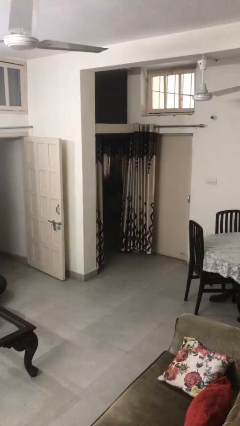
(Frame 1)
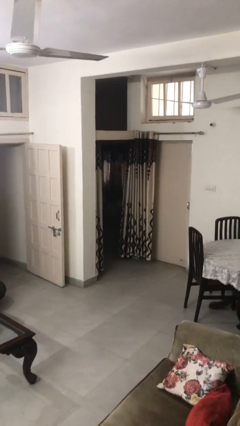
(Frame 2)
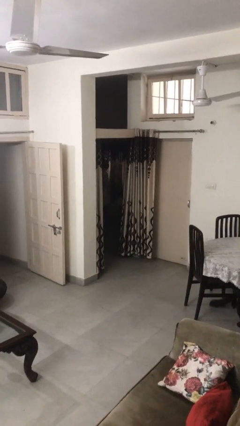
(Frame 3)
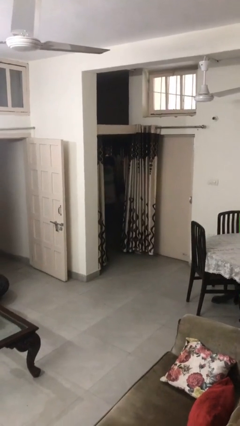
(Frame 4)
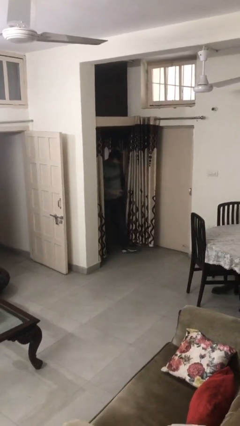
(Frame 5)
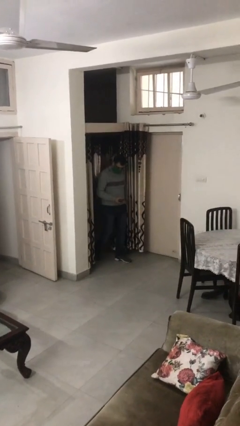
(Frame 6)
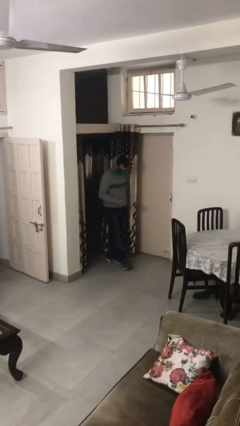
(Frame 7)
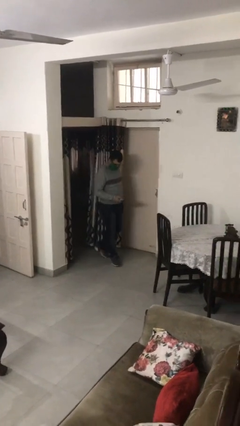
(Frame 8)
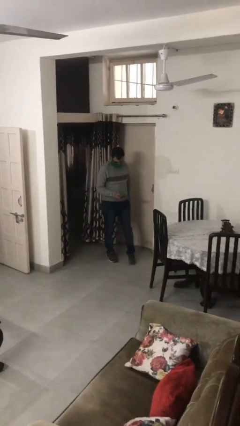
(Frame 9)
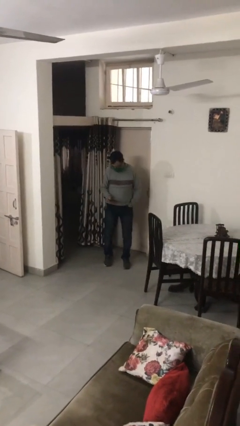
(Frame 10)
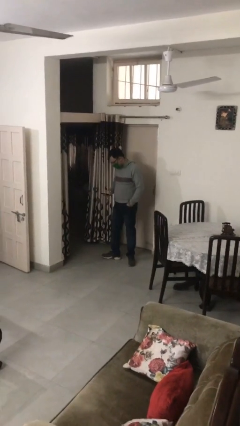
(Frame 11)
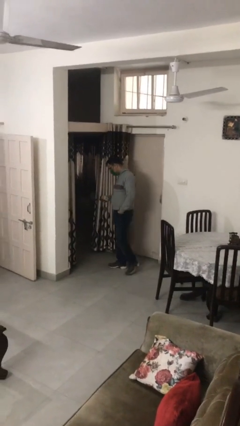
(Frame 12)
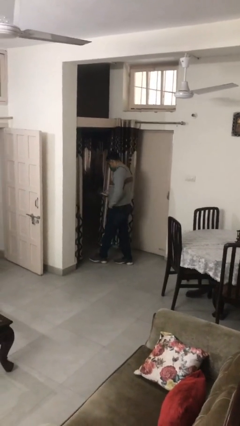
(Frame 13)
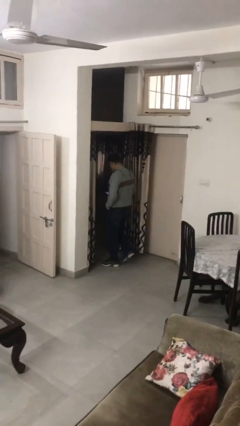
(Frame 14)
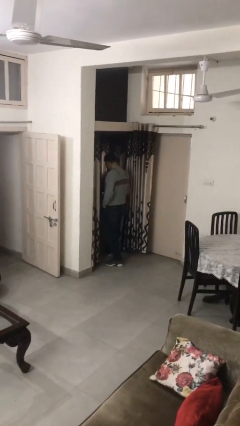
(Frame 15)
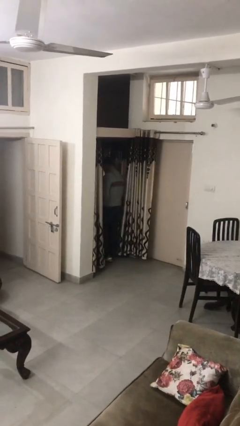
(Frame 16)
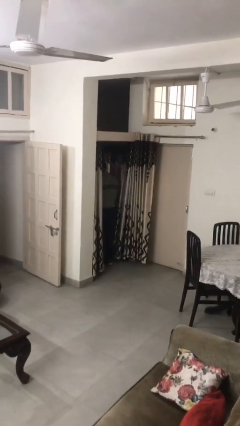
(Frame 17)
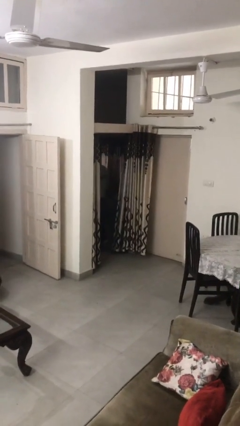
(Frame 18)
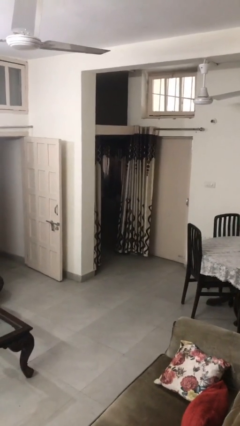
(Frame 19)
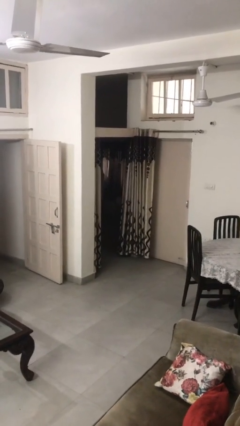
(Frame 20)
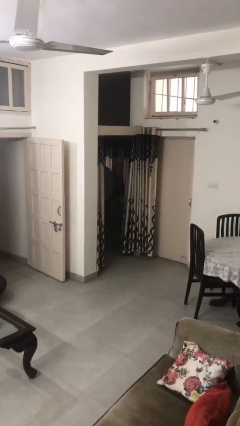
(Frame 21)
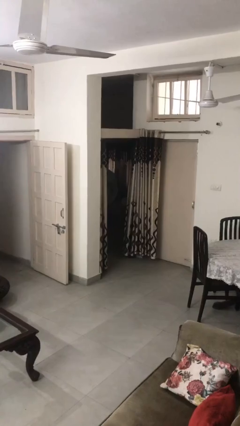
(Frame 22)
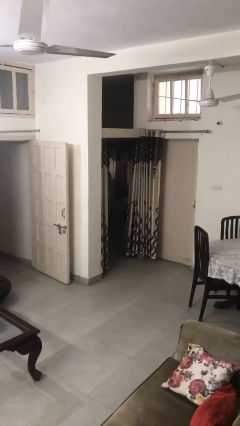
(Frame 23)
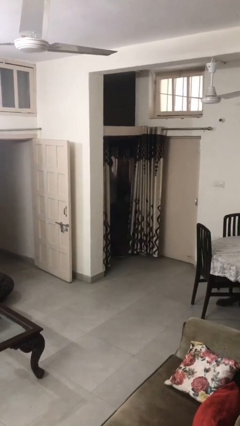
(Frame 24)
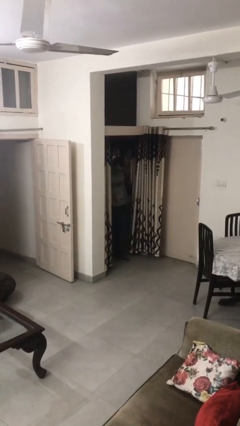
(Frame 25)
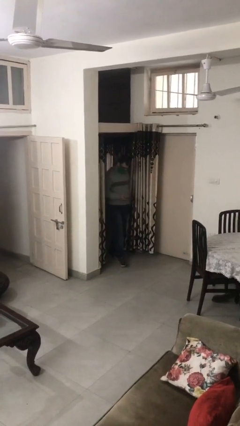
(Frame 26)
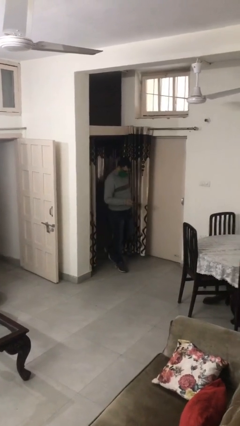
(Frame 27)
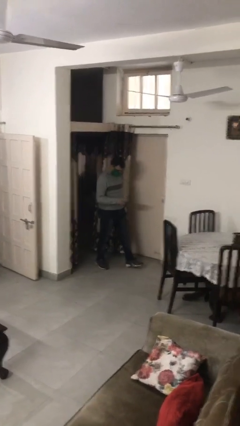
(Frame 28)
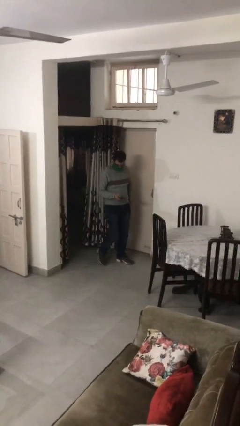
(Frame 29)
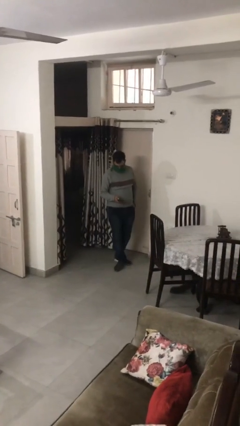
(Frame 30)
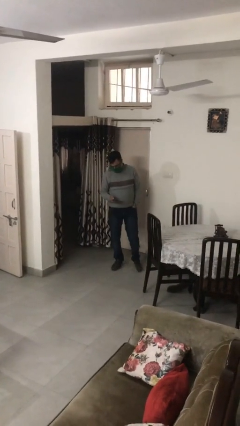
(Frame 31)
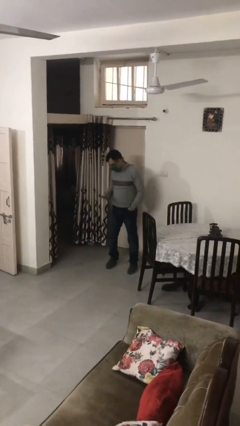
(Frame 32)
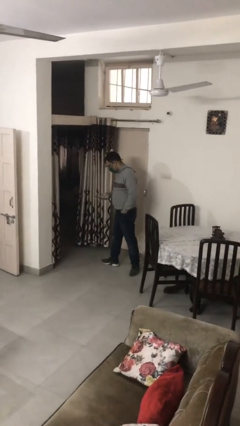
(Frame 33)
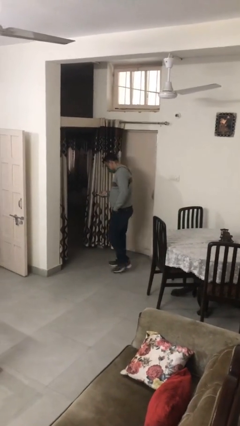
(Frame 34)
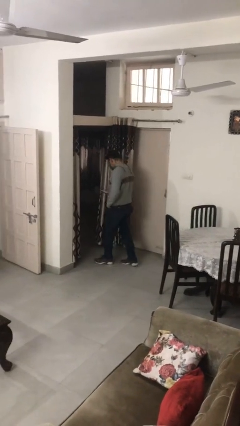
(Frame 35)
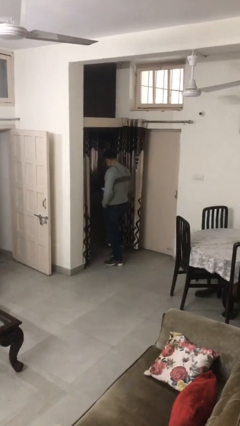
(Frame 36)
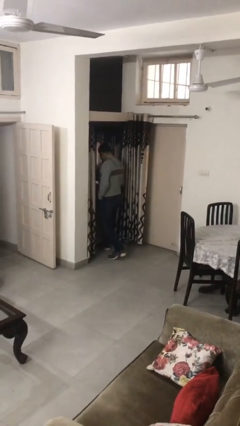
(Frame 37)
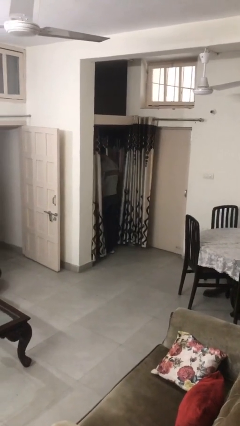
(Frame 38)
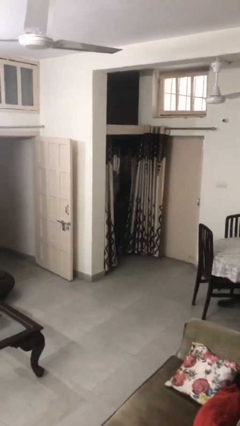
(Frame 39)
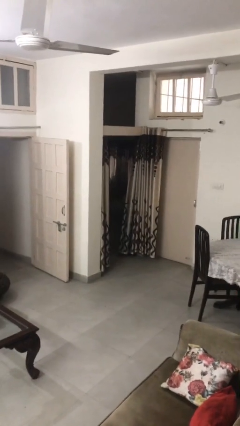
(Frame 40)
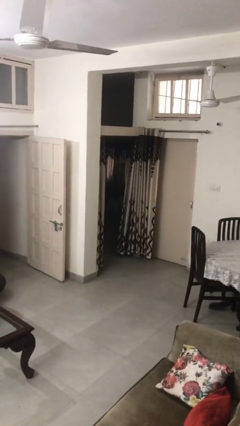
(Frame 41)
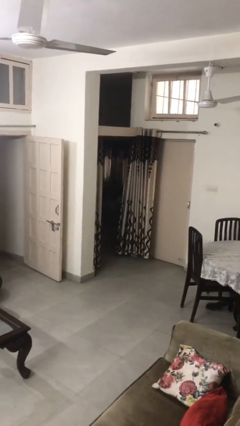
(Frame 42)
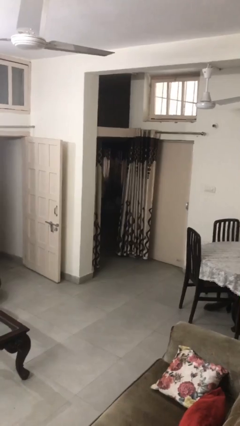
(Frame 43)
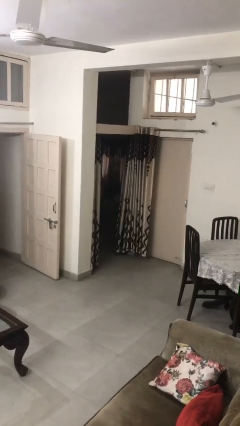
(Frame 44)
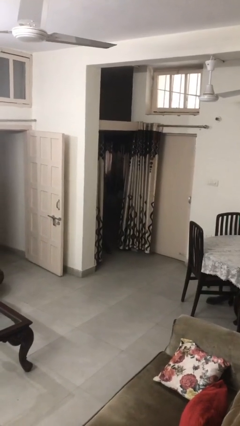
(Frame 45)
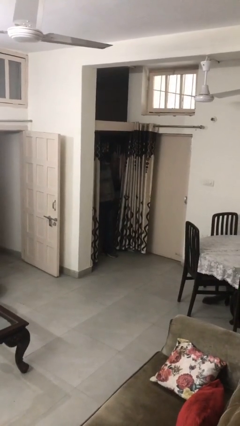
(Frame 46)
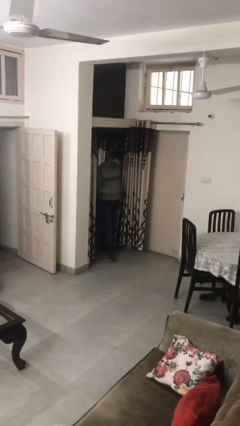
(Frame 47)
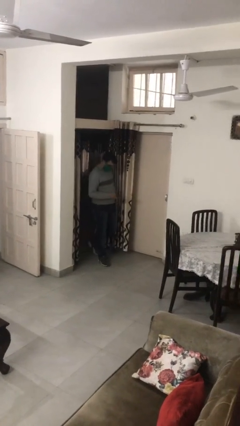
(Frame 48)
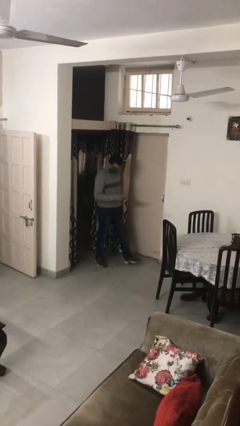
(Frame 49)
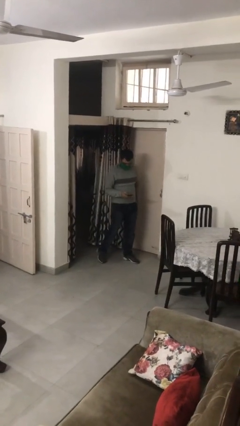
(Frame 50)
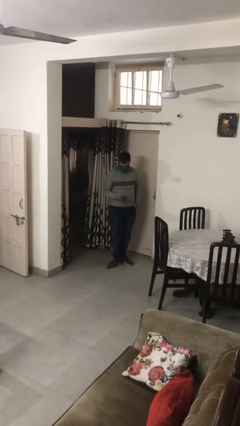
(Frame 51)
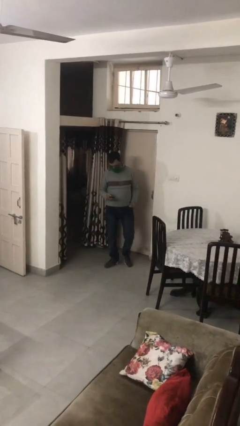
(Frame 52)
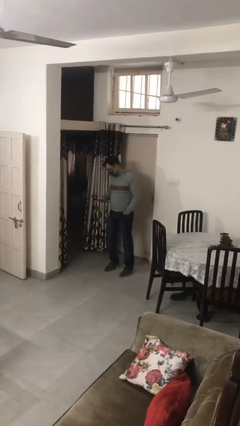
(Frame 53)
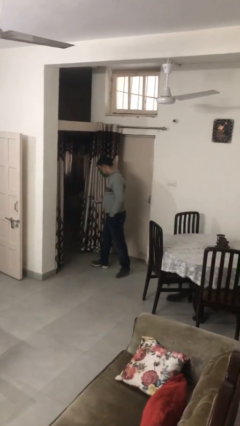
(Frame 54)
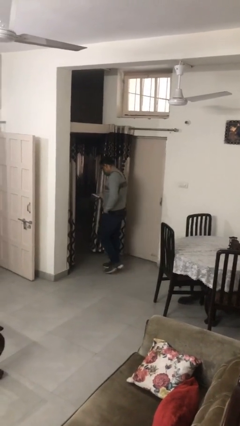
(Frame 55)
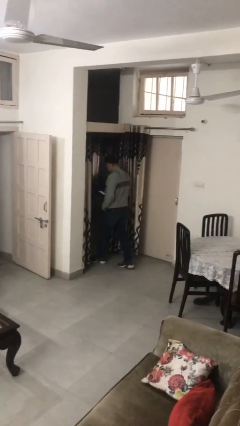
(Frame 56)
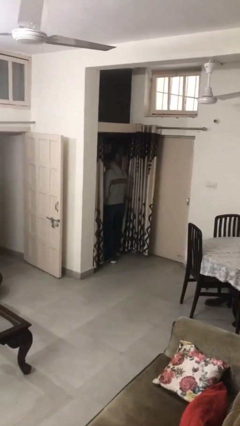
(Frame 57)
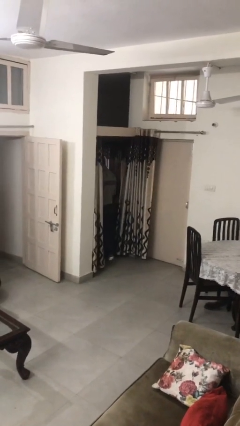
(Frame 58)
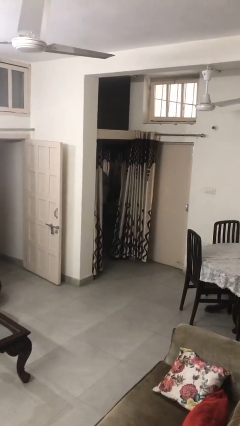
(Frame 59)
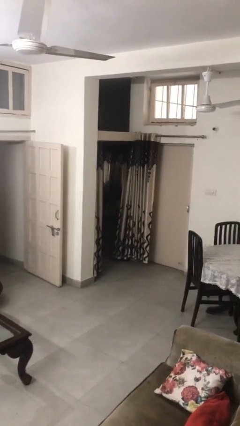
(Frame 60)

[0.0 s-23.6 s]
person texts on phone

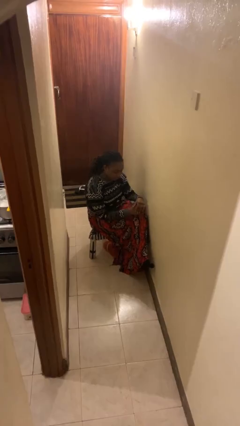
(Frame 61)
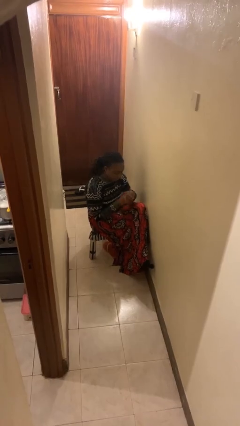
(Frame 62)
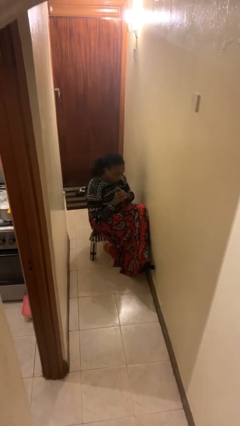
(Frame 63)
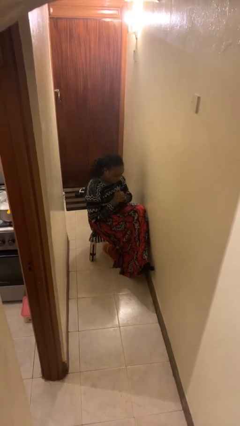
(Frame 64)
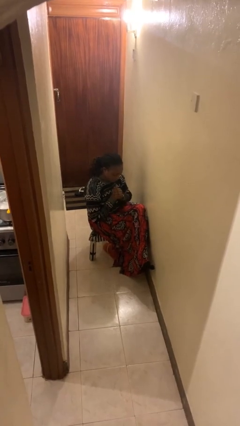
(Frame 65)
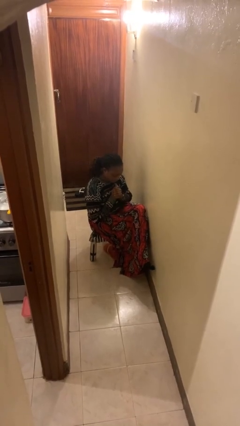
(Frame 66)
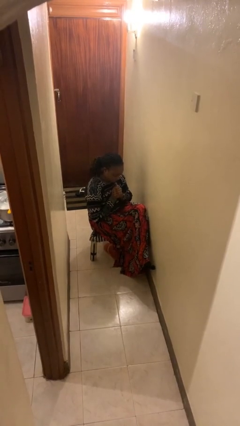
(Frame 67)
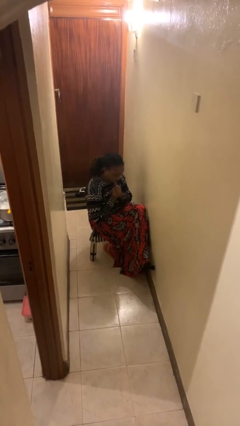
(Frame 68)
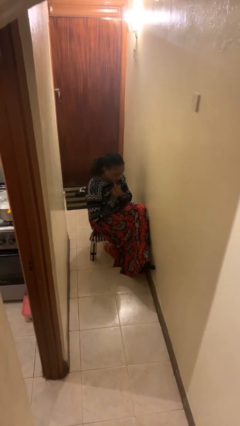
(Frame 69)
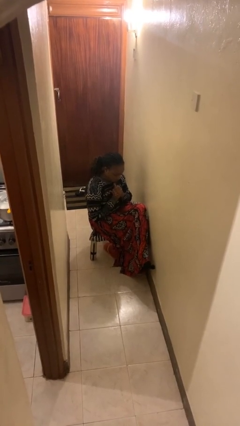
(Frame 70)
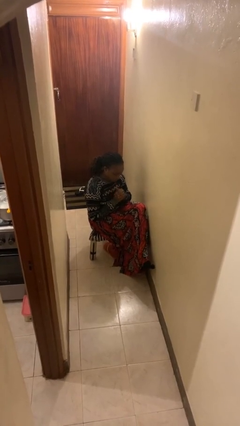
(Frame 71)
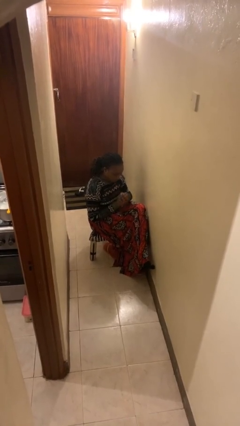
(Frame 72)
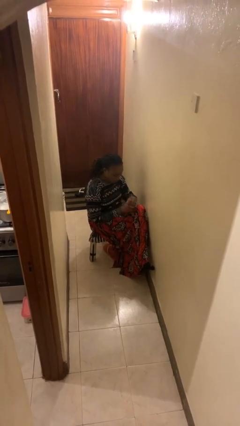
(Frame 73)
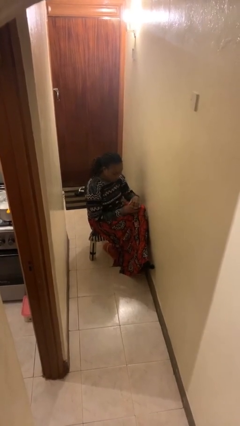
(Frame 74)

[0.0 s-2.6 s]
person cracks knuckles

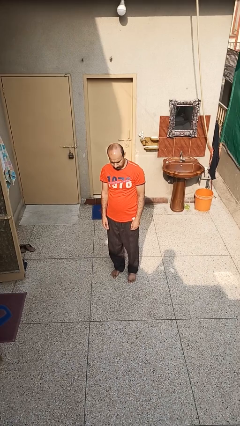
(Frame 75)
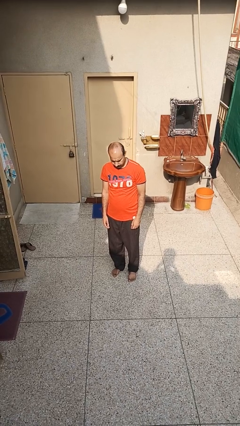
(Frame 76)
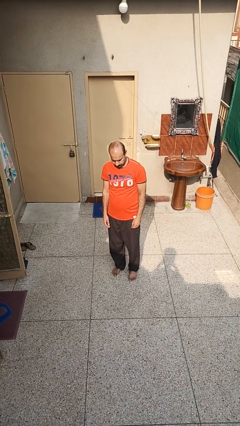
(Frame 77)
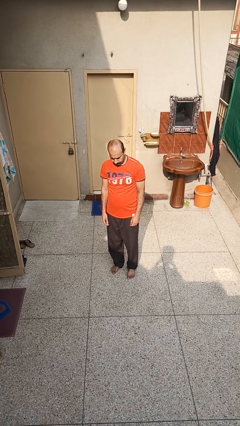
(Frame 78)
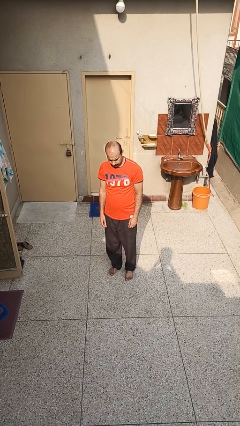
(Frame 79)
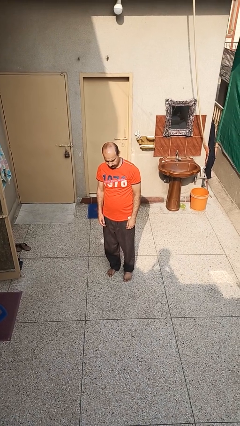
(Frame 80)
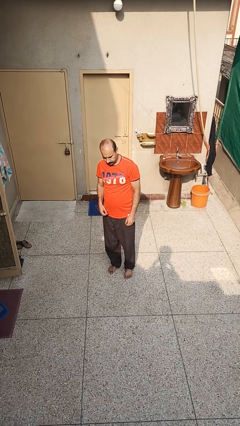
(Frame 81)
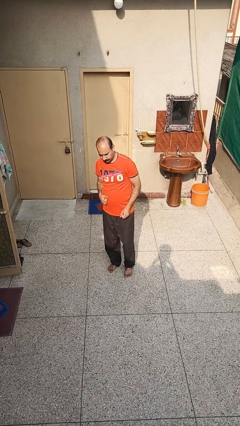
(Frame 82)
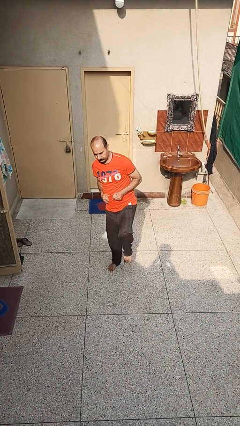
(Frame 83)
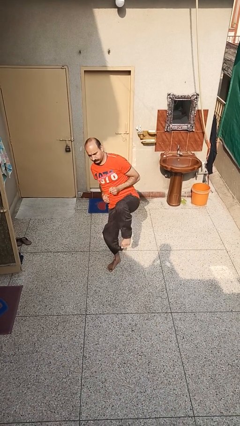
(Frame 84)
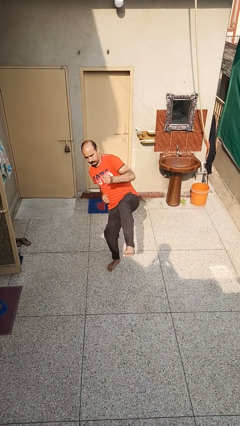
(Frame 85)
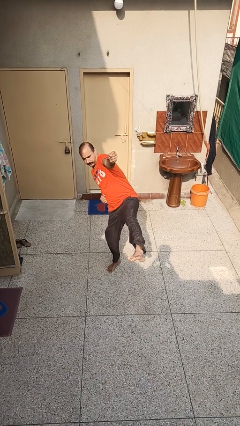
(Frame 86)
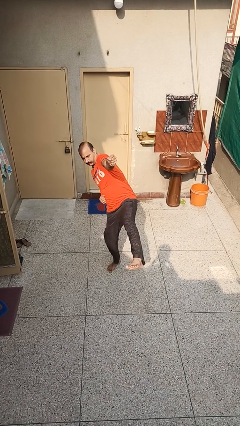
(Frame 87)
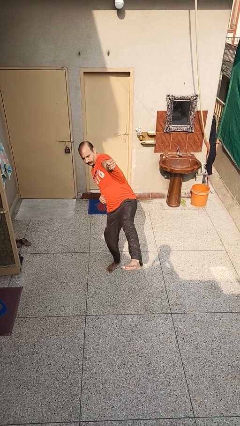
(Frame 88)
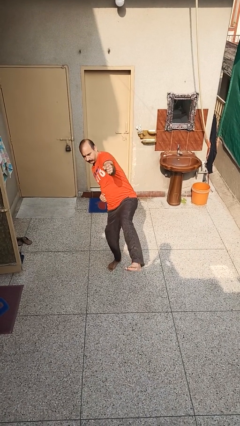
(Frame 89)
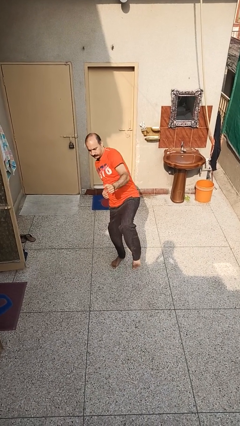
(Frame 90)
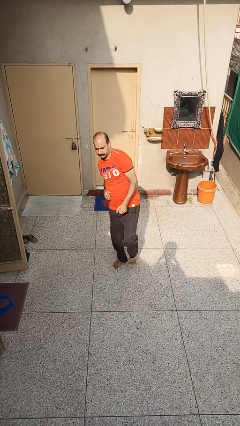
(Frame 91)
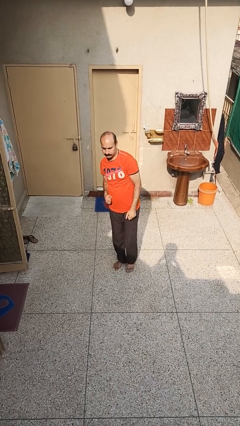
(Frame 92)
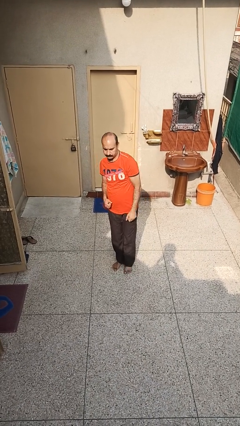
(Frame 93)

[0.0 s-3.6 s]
person karate kicks
